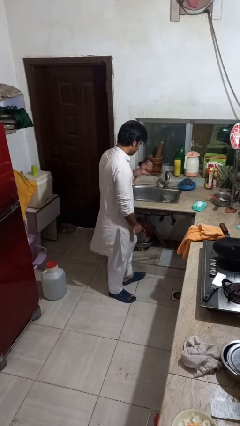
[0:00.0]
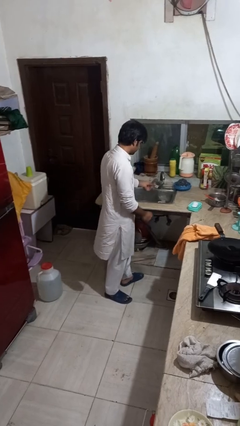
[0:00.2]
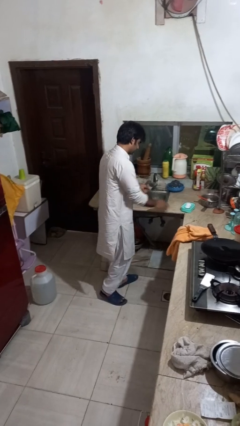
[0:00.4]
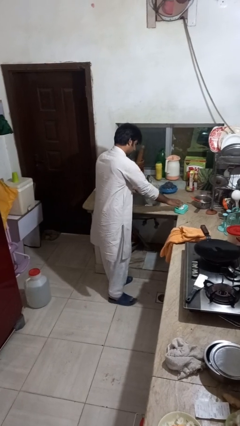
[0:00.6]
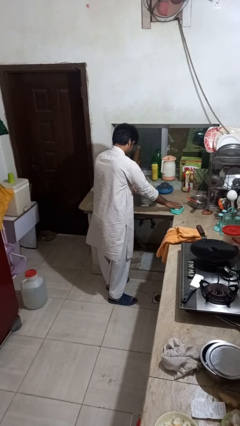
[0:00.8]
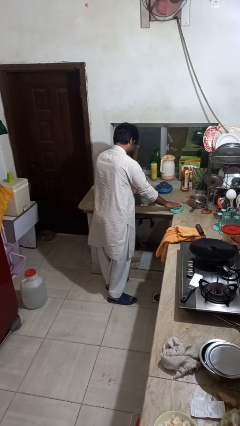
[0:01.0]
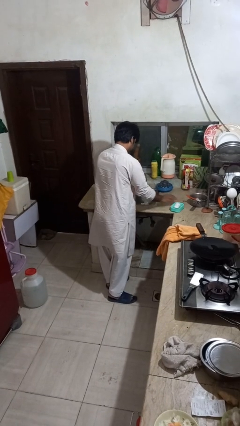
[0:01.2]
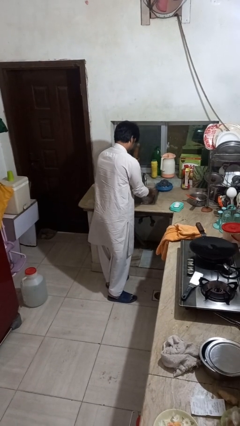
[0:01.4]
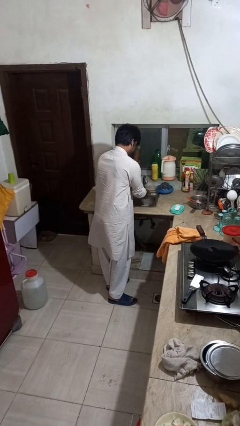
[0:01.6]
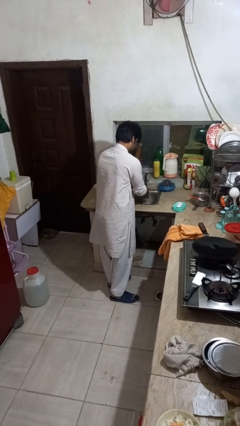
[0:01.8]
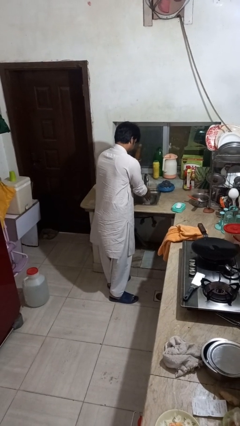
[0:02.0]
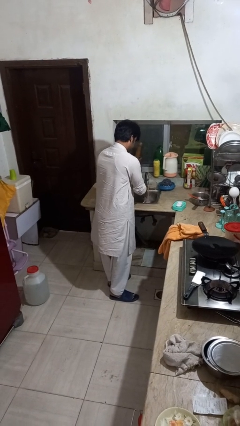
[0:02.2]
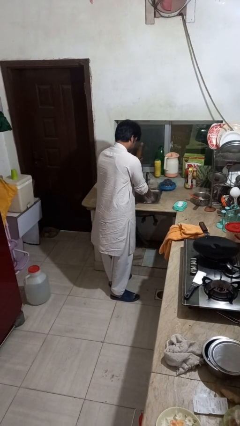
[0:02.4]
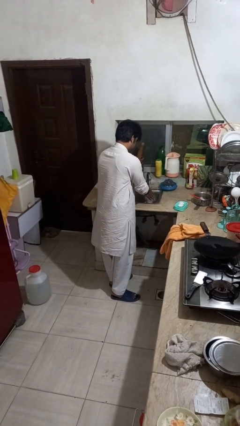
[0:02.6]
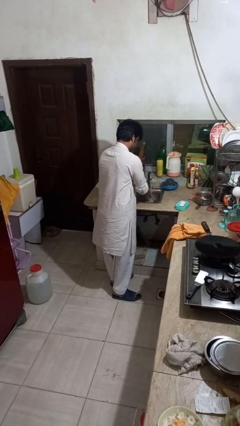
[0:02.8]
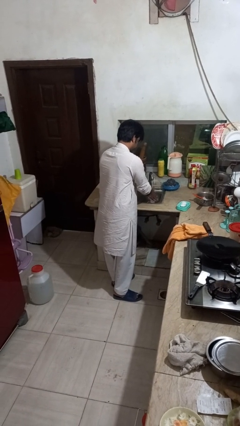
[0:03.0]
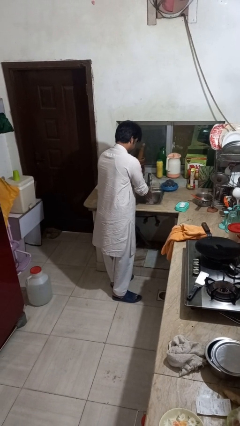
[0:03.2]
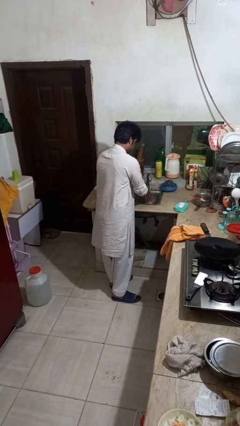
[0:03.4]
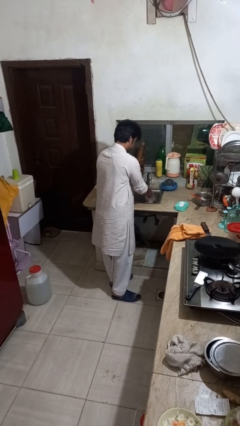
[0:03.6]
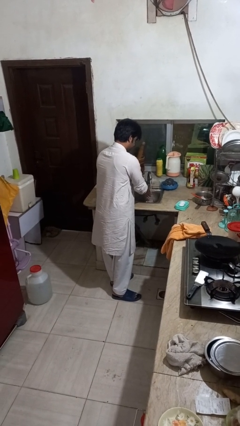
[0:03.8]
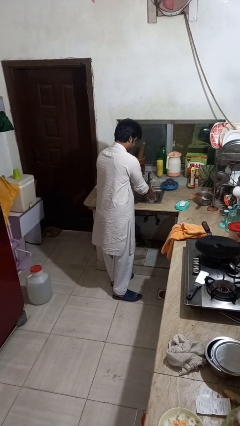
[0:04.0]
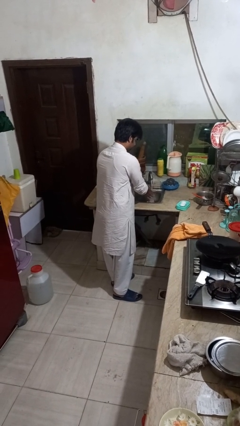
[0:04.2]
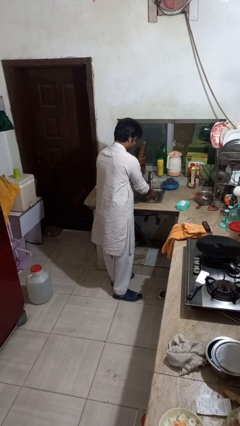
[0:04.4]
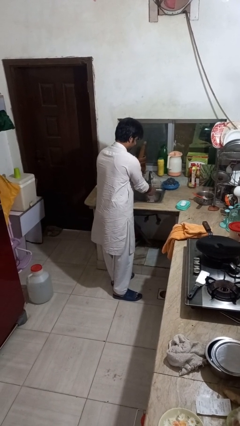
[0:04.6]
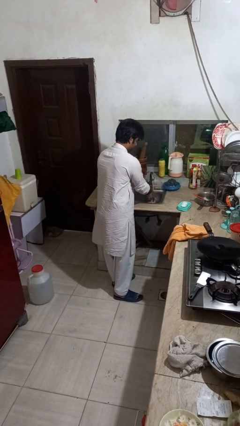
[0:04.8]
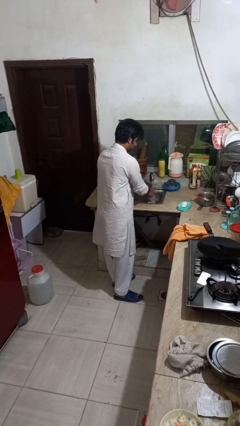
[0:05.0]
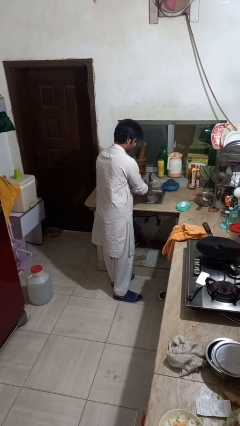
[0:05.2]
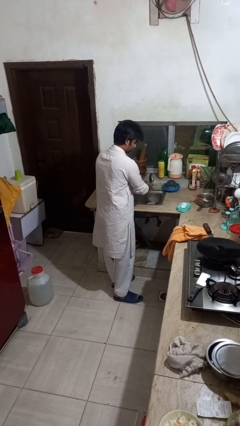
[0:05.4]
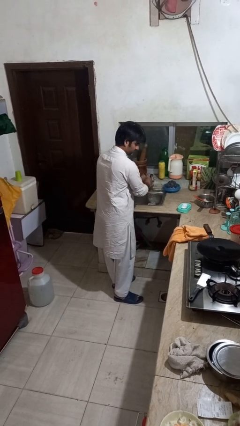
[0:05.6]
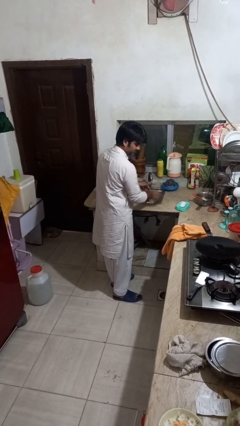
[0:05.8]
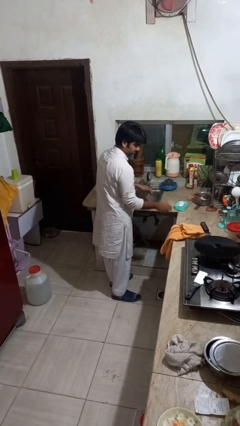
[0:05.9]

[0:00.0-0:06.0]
person washes hands

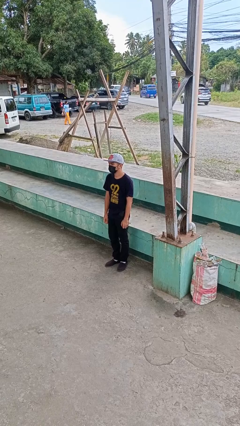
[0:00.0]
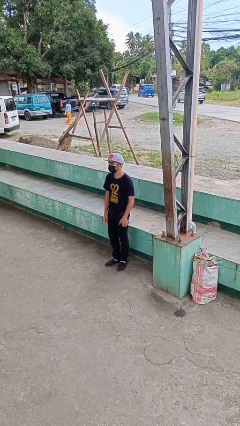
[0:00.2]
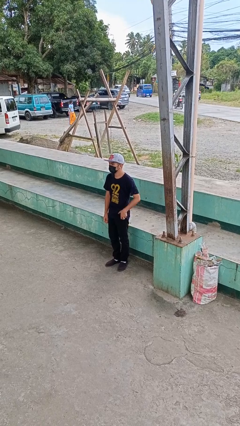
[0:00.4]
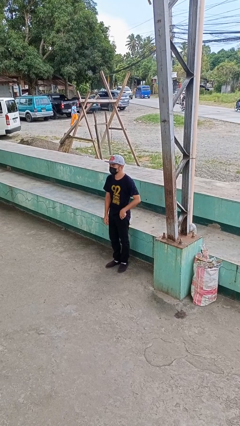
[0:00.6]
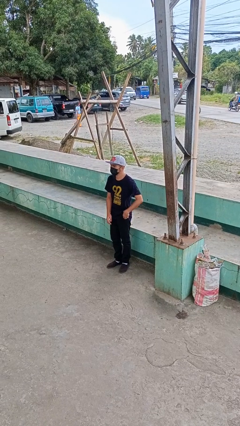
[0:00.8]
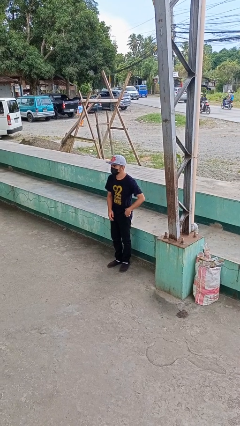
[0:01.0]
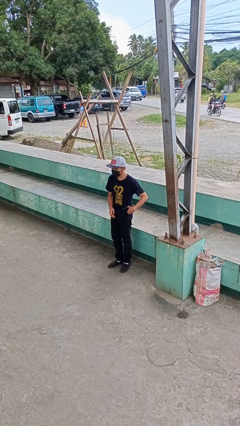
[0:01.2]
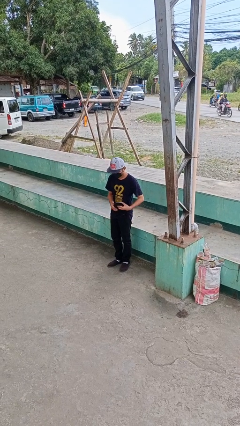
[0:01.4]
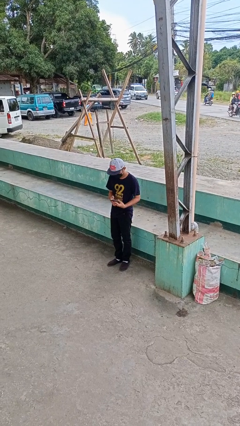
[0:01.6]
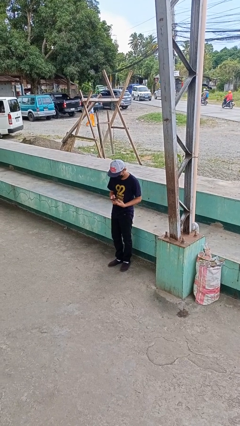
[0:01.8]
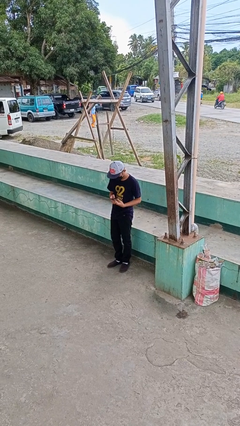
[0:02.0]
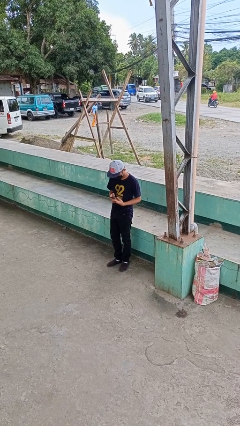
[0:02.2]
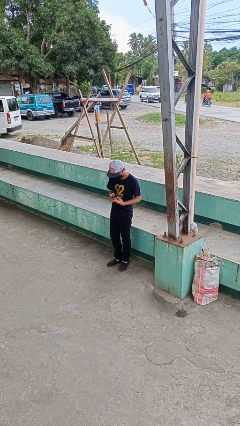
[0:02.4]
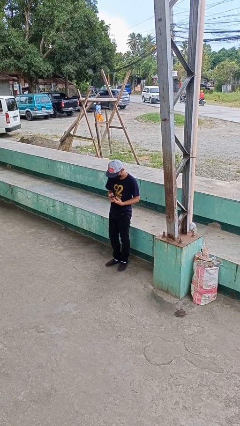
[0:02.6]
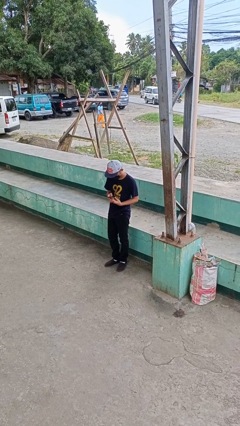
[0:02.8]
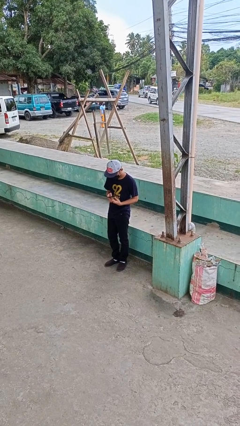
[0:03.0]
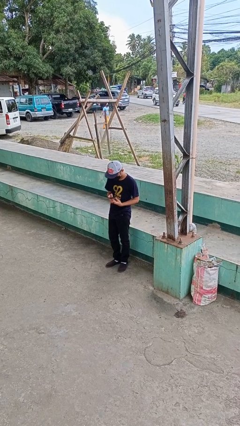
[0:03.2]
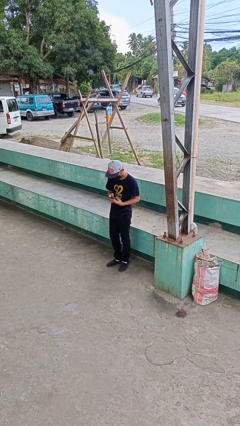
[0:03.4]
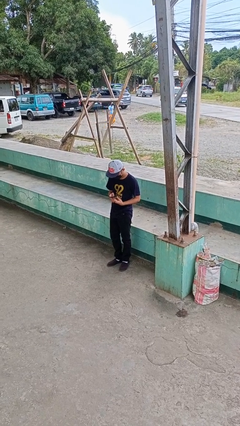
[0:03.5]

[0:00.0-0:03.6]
person takes phone from pocket

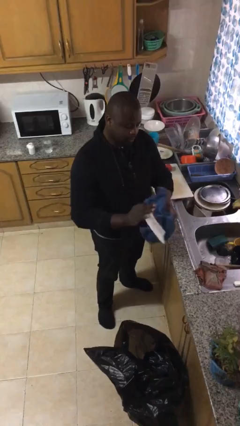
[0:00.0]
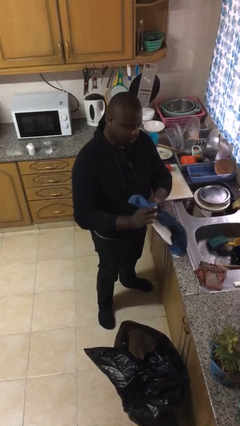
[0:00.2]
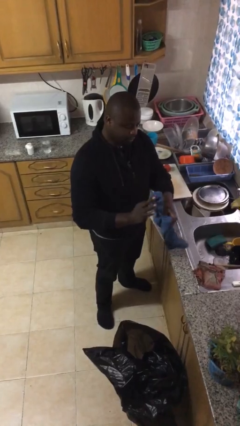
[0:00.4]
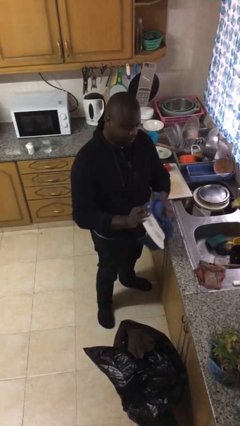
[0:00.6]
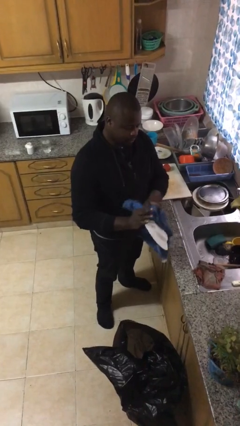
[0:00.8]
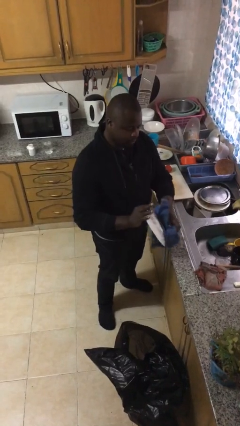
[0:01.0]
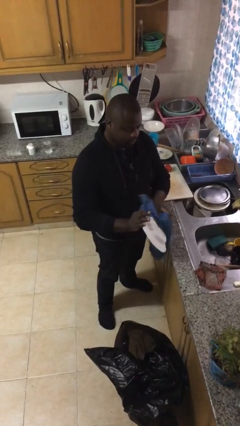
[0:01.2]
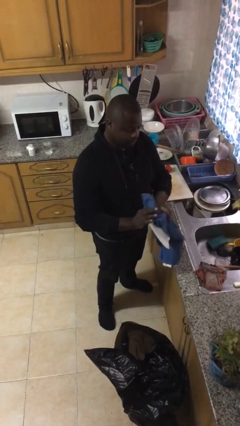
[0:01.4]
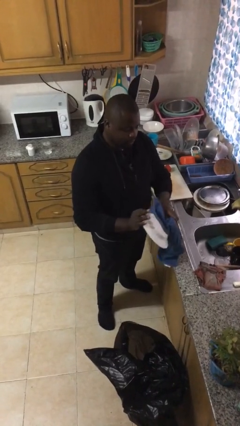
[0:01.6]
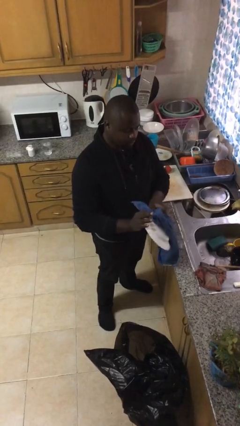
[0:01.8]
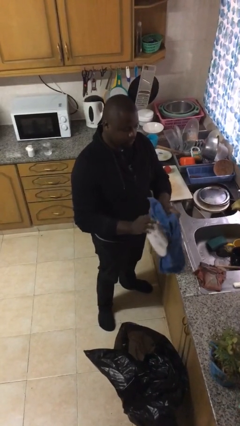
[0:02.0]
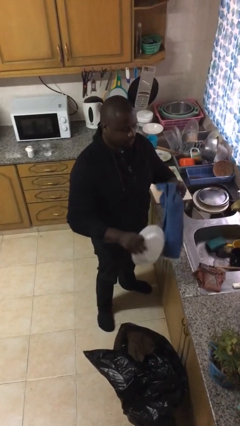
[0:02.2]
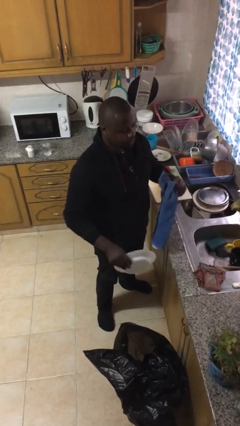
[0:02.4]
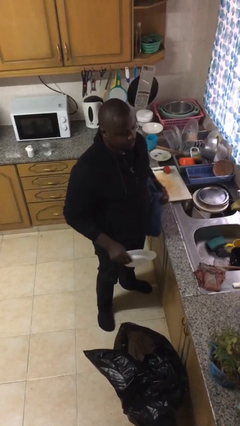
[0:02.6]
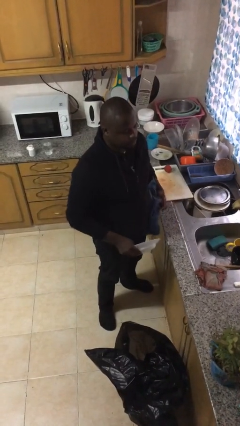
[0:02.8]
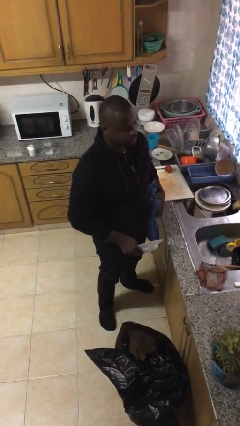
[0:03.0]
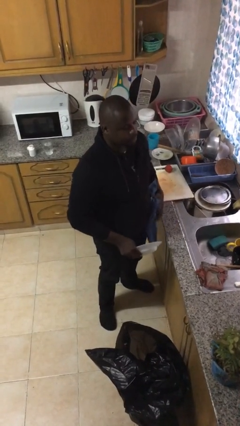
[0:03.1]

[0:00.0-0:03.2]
person dries dish

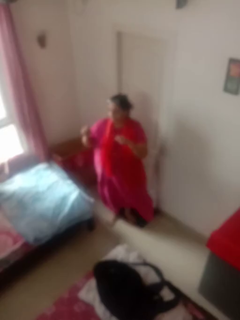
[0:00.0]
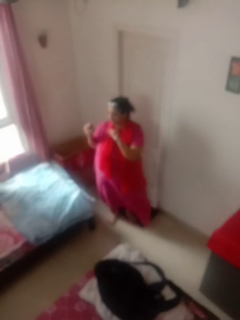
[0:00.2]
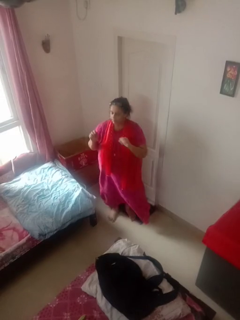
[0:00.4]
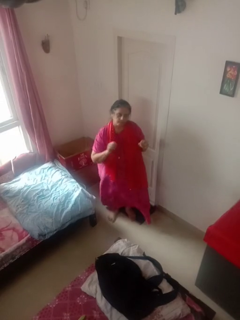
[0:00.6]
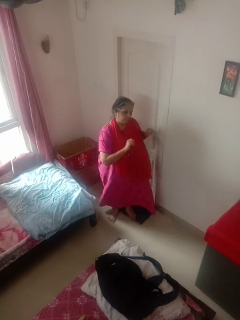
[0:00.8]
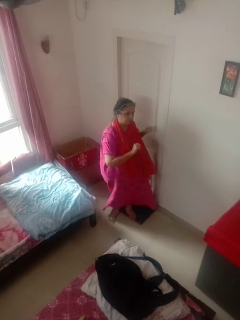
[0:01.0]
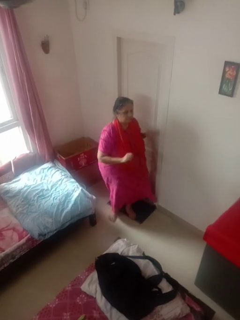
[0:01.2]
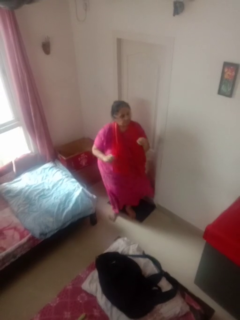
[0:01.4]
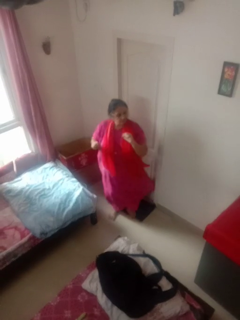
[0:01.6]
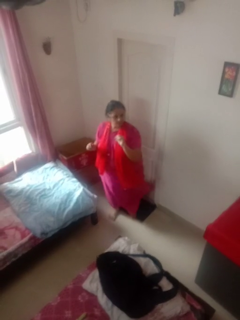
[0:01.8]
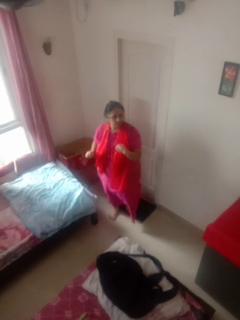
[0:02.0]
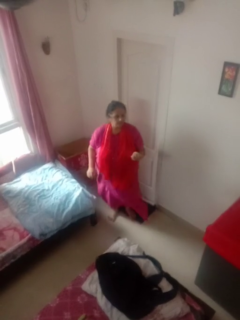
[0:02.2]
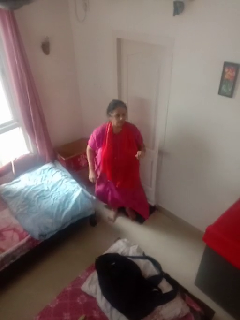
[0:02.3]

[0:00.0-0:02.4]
person dances in place

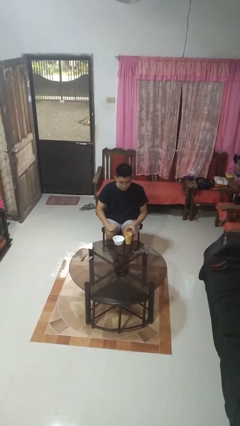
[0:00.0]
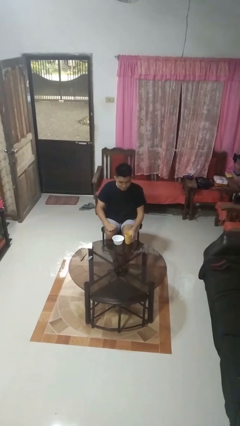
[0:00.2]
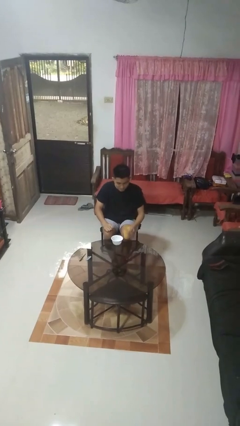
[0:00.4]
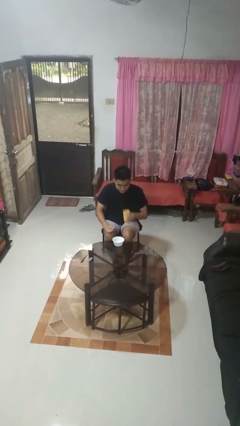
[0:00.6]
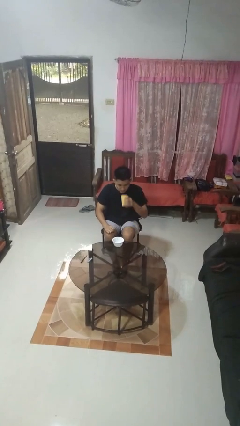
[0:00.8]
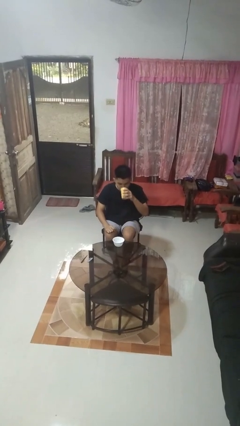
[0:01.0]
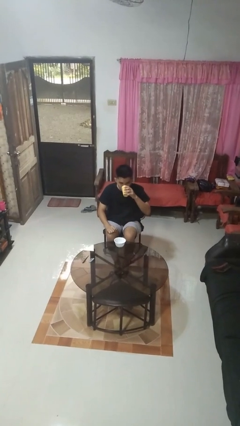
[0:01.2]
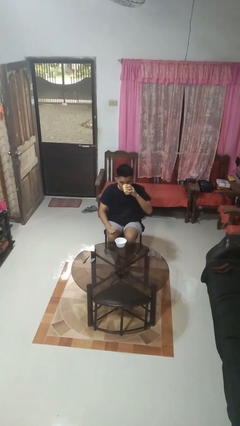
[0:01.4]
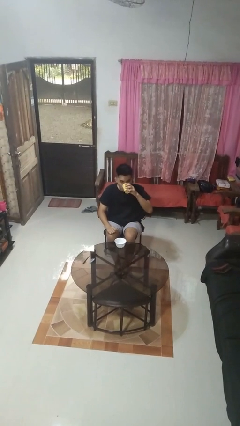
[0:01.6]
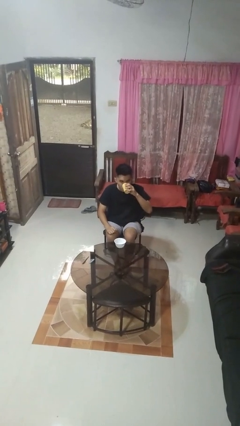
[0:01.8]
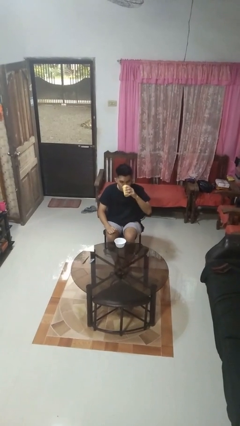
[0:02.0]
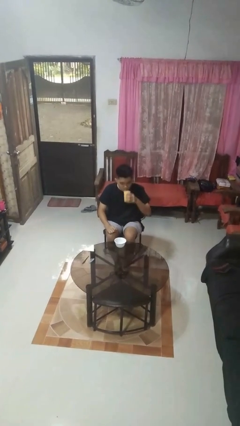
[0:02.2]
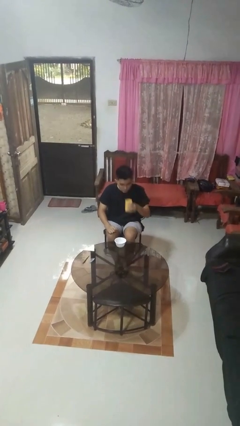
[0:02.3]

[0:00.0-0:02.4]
person drinks from cup

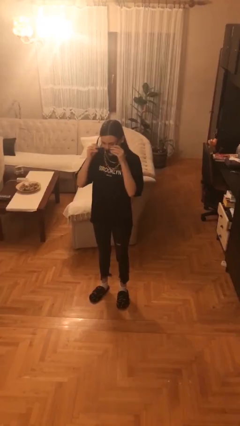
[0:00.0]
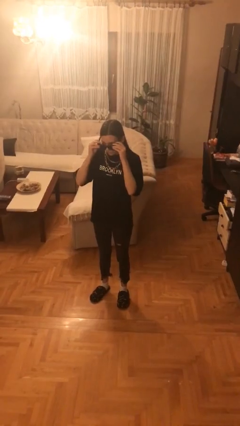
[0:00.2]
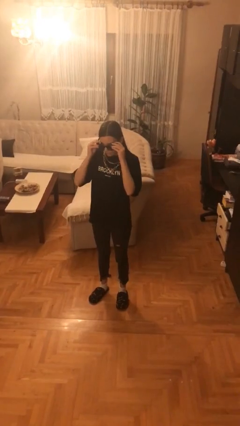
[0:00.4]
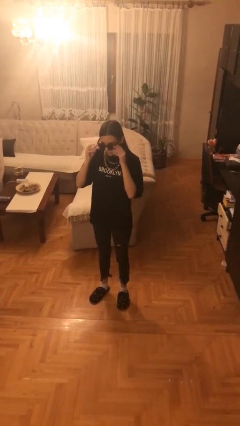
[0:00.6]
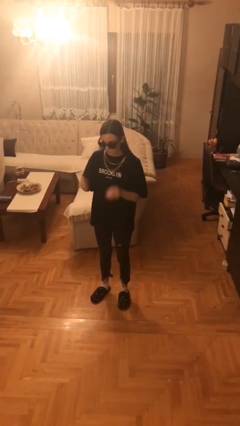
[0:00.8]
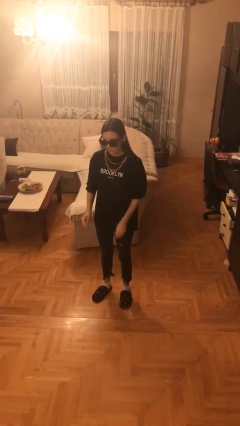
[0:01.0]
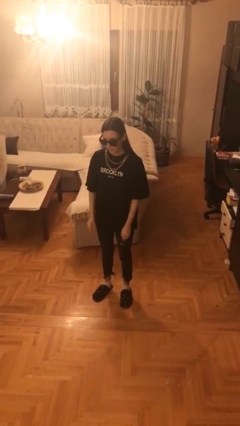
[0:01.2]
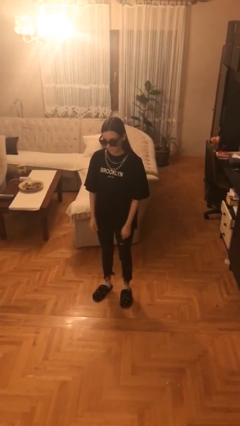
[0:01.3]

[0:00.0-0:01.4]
person puts on sunglasses
